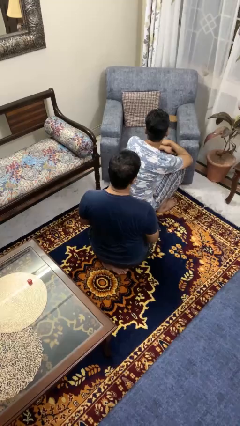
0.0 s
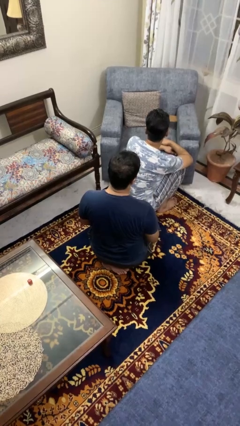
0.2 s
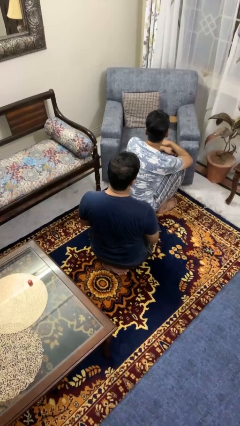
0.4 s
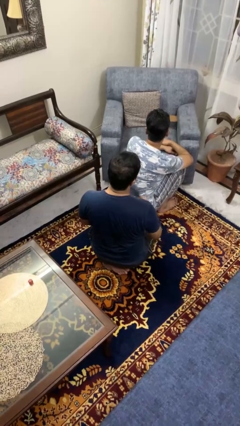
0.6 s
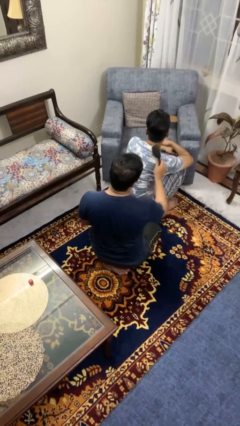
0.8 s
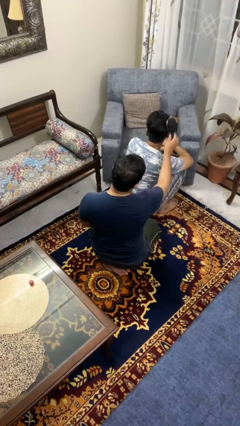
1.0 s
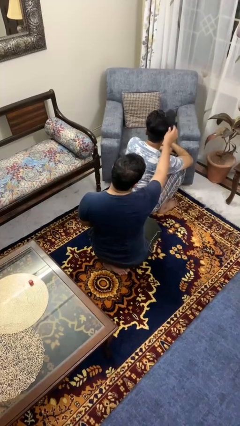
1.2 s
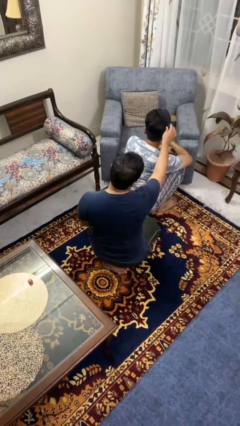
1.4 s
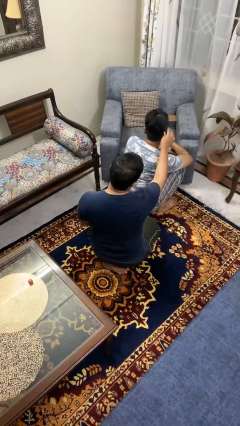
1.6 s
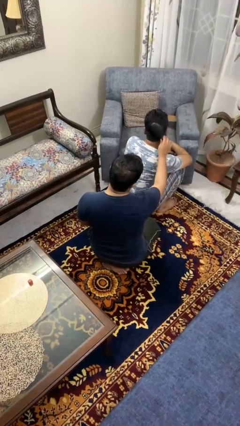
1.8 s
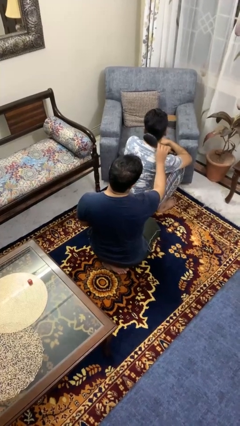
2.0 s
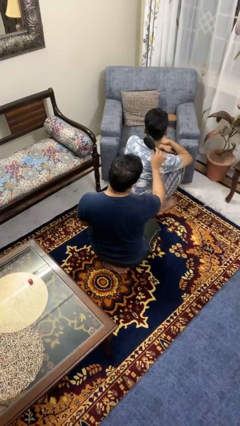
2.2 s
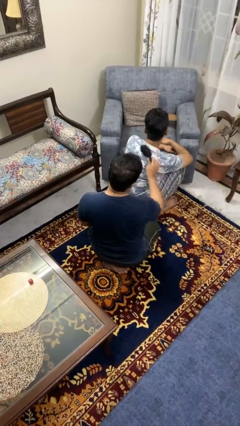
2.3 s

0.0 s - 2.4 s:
person brushes hair of person

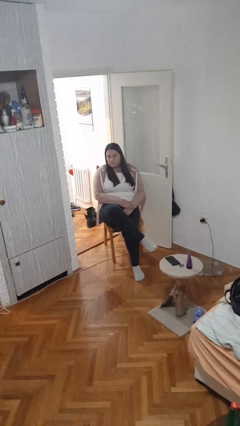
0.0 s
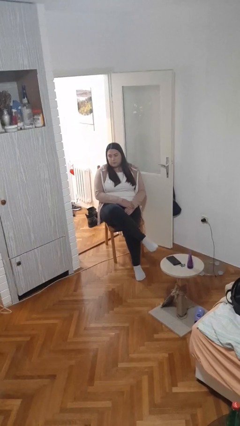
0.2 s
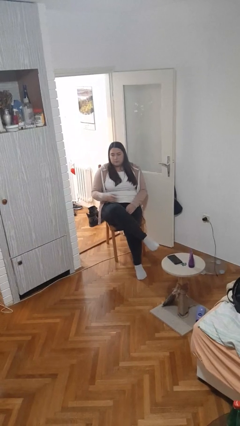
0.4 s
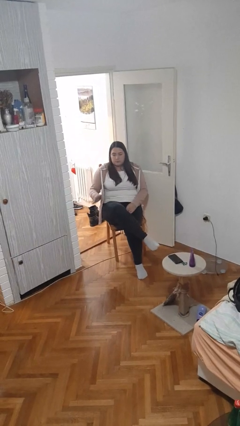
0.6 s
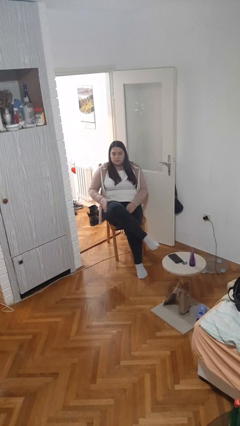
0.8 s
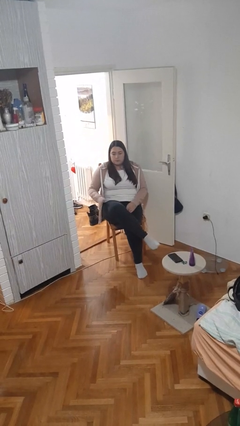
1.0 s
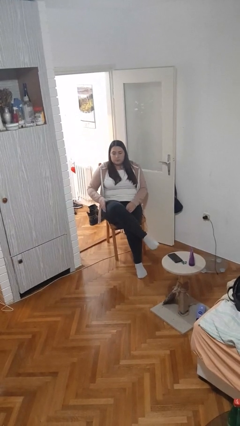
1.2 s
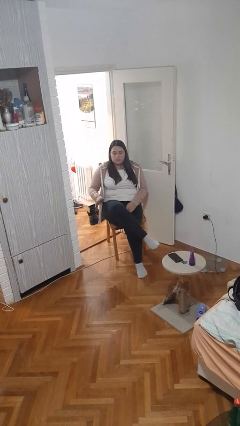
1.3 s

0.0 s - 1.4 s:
person slaps hands on thighs

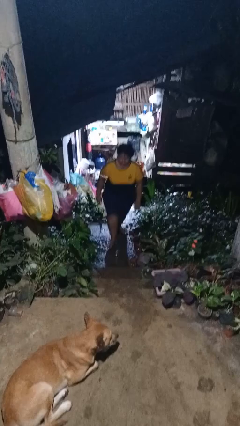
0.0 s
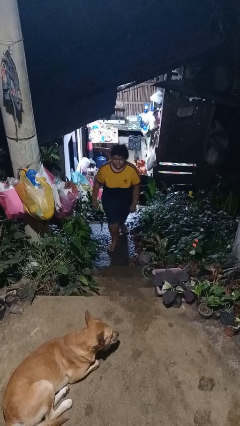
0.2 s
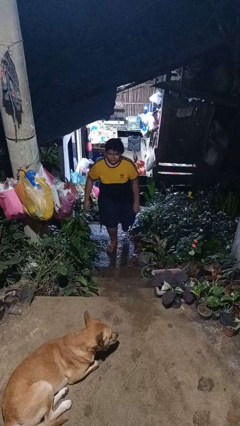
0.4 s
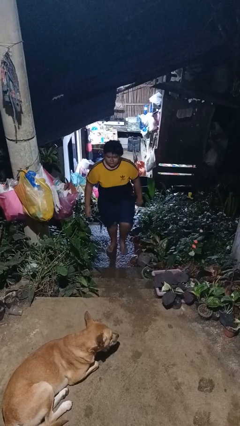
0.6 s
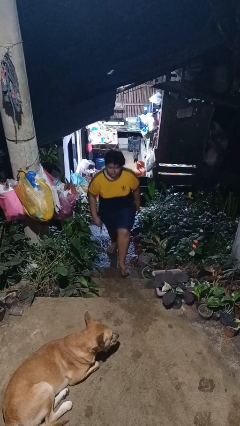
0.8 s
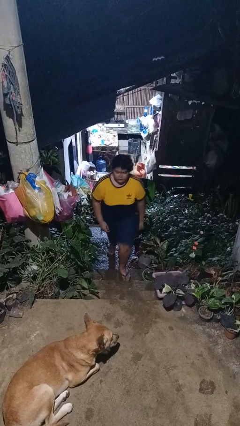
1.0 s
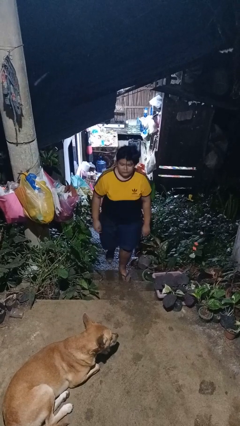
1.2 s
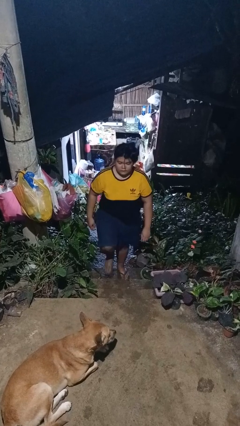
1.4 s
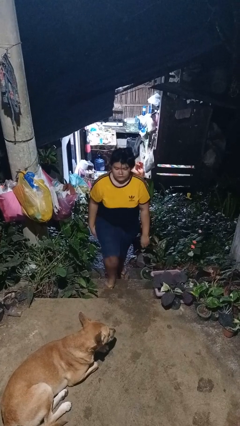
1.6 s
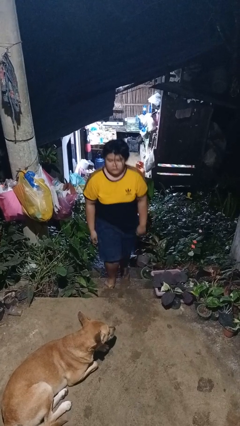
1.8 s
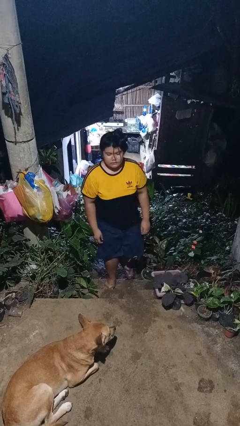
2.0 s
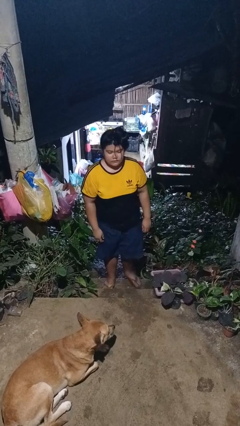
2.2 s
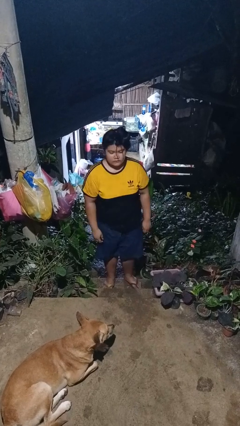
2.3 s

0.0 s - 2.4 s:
person climbs up stairs

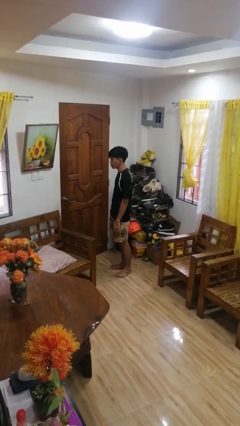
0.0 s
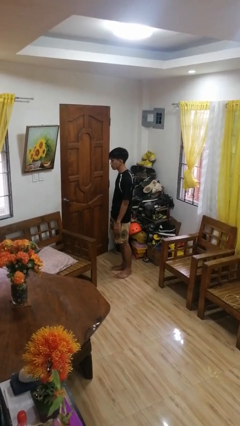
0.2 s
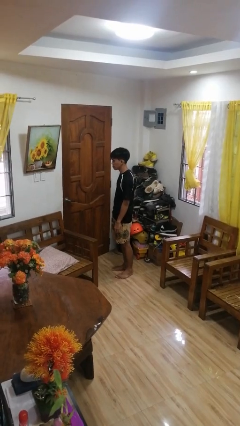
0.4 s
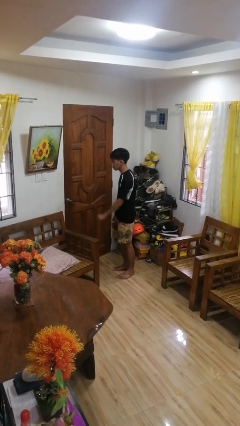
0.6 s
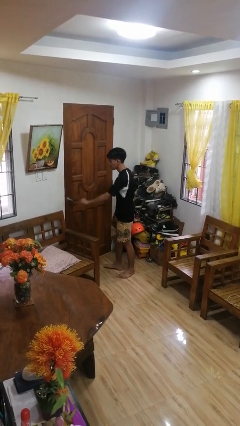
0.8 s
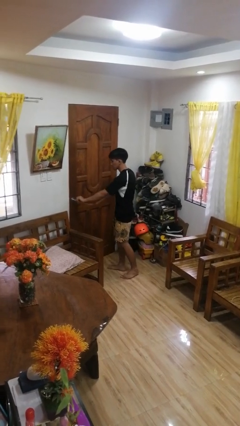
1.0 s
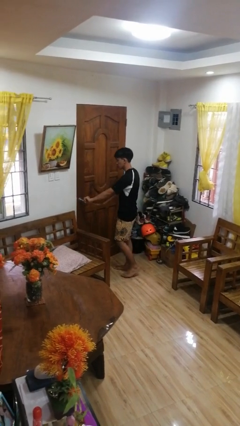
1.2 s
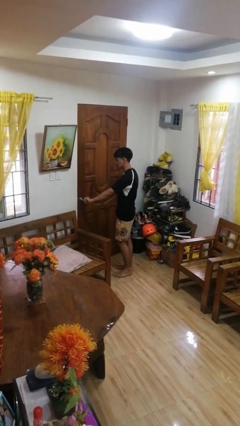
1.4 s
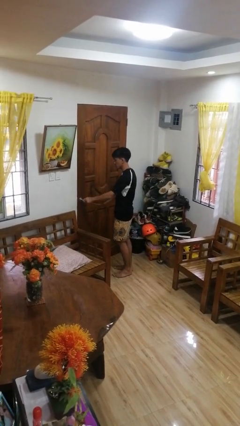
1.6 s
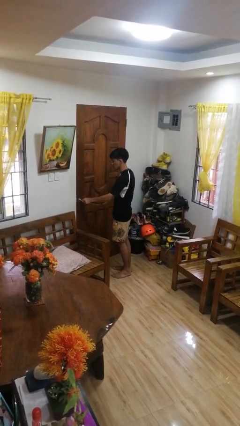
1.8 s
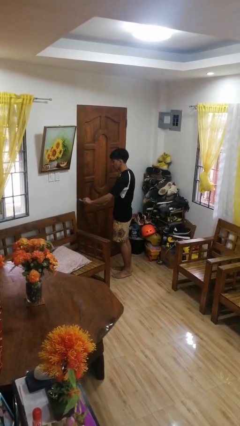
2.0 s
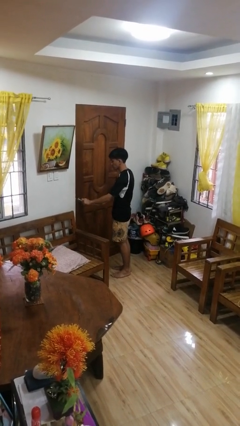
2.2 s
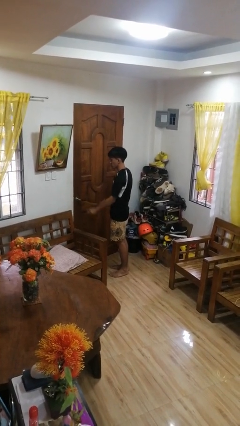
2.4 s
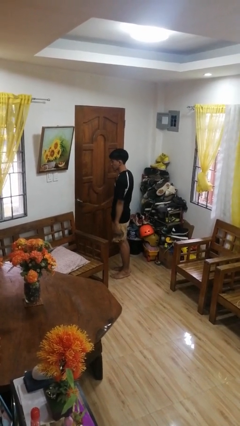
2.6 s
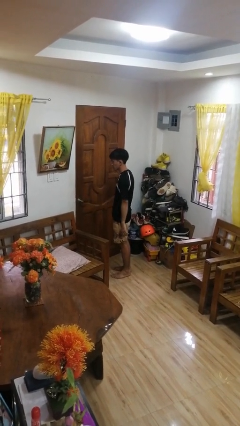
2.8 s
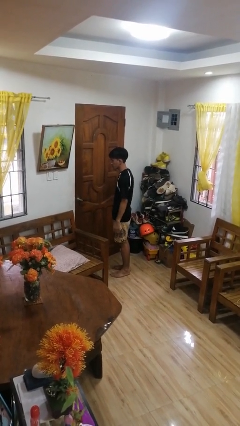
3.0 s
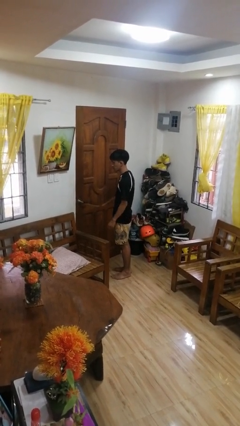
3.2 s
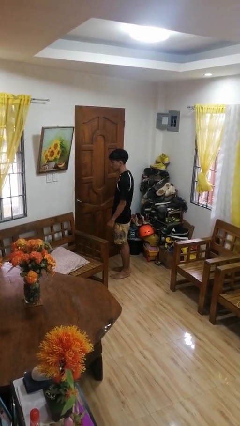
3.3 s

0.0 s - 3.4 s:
person unlocks door with keys

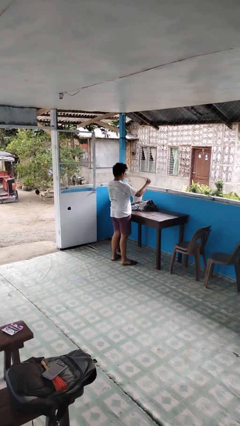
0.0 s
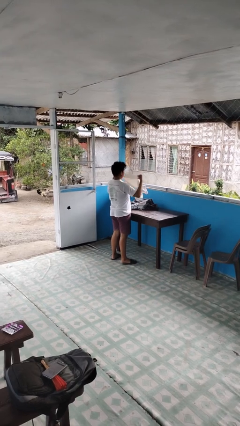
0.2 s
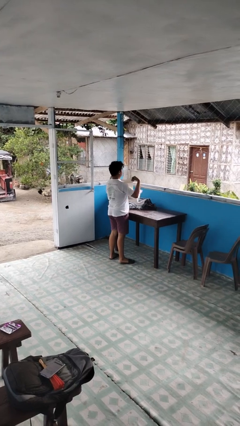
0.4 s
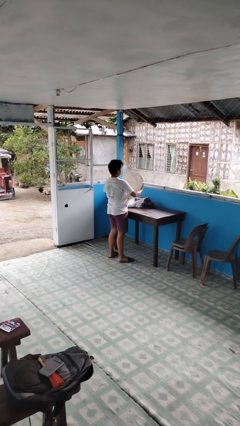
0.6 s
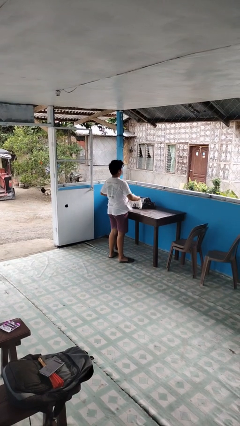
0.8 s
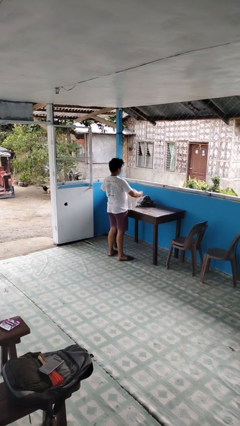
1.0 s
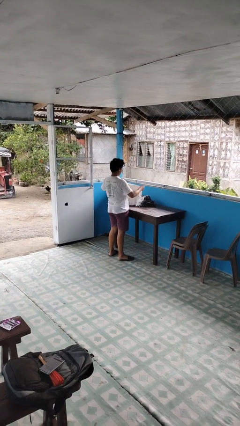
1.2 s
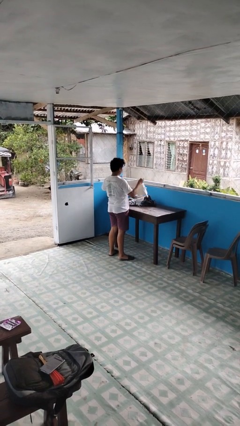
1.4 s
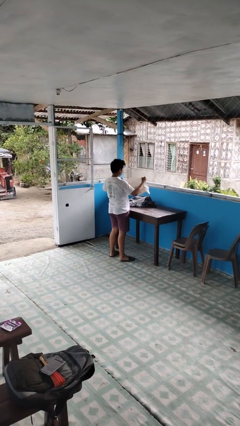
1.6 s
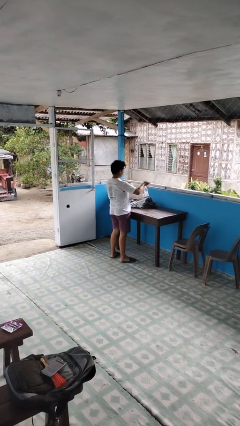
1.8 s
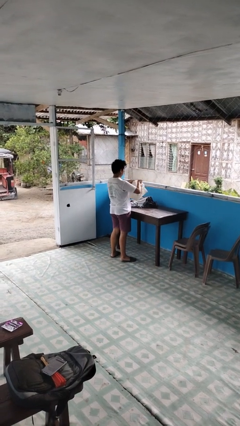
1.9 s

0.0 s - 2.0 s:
person folds shirt

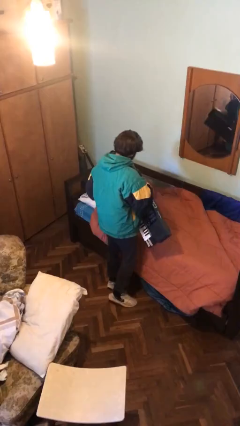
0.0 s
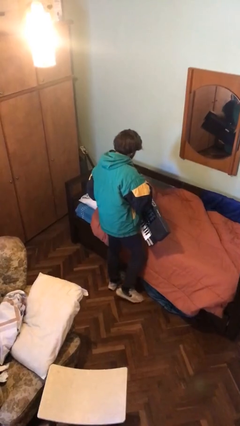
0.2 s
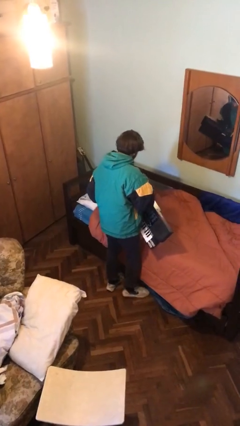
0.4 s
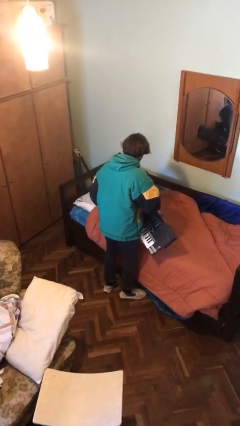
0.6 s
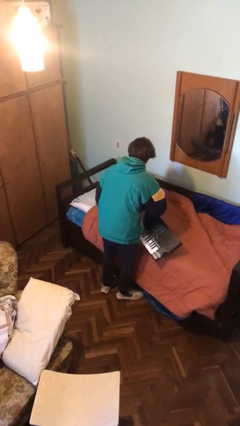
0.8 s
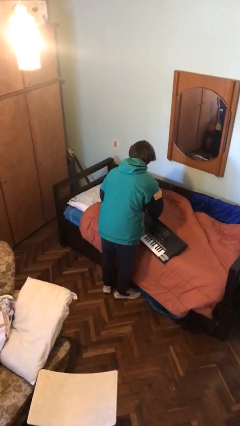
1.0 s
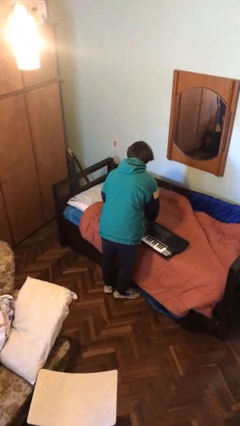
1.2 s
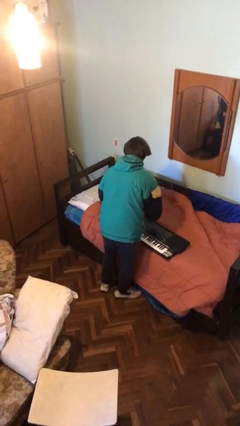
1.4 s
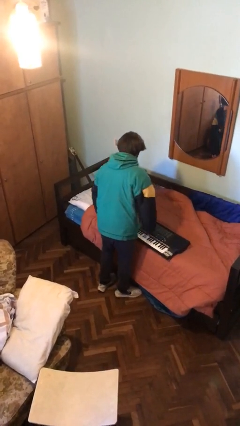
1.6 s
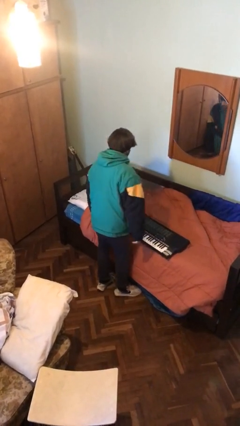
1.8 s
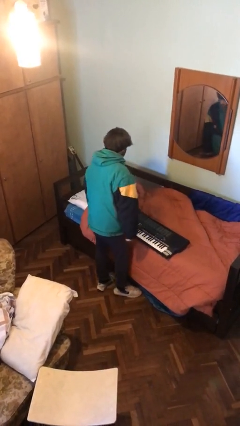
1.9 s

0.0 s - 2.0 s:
person puts down object on bed

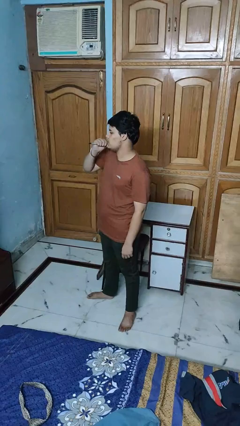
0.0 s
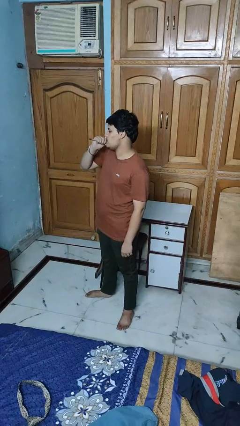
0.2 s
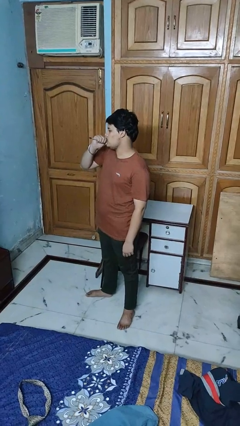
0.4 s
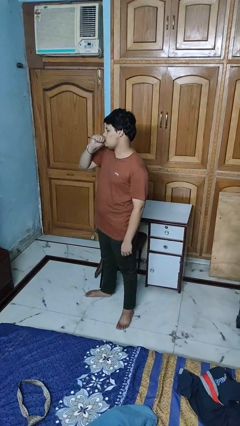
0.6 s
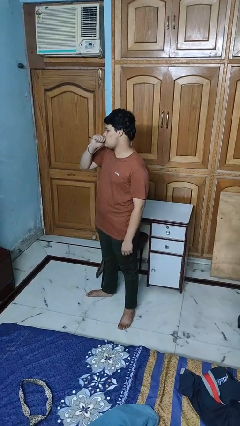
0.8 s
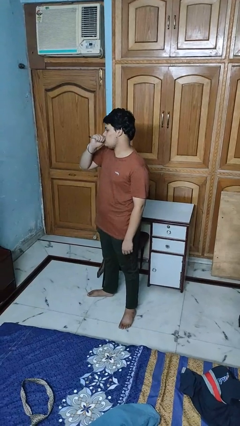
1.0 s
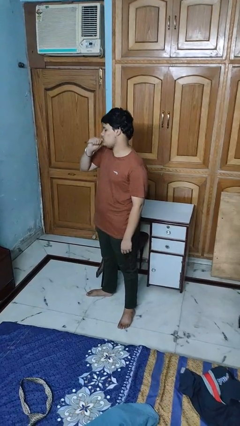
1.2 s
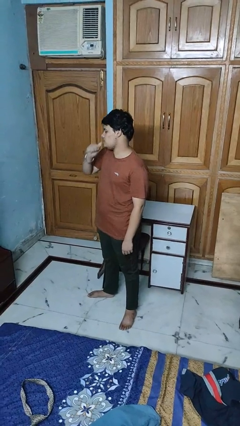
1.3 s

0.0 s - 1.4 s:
person vapes

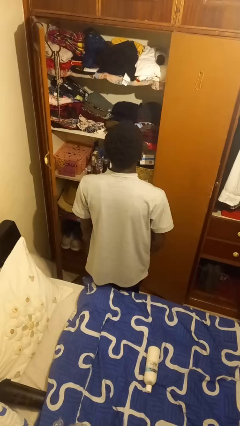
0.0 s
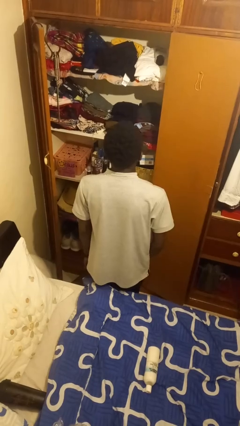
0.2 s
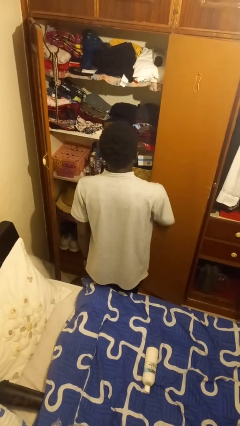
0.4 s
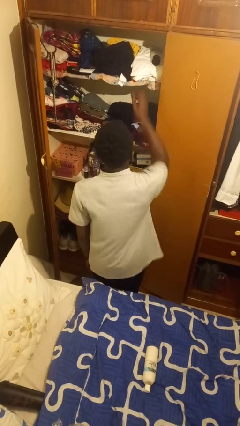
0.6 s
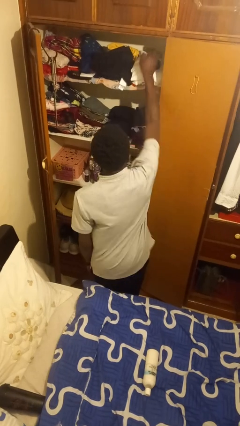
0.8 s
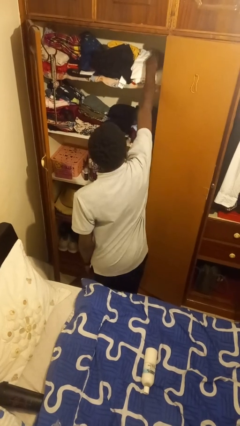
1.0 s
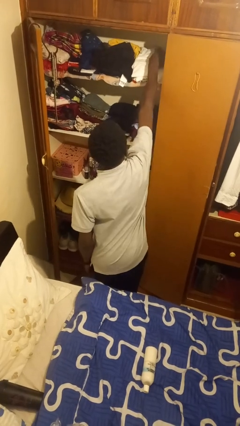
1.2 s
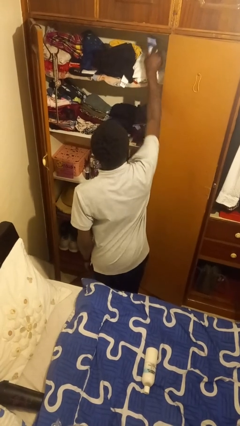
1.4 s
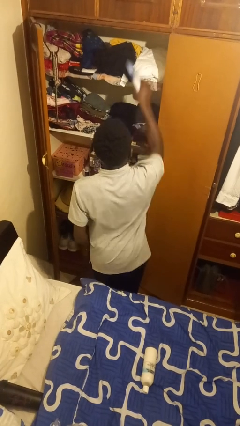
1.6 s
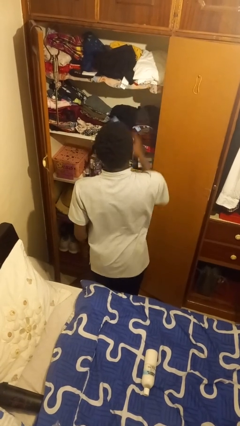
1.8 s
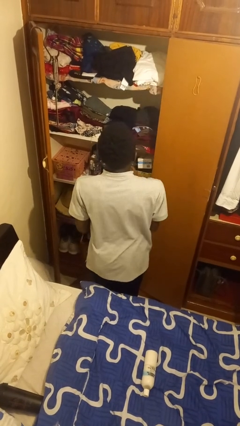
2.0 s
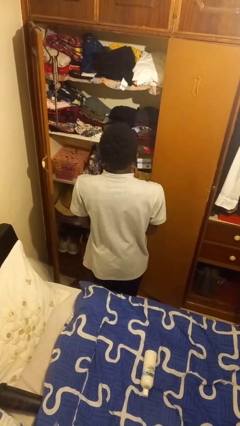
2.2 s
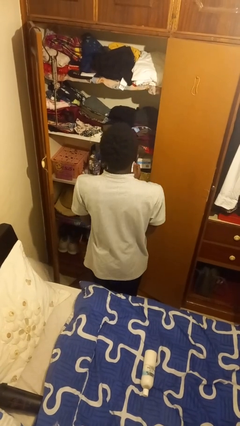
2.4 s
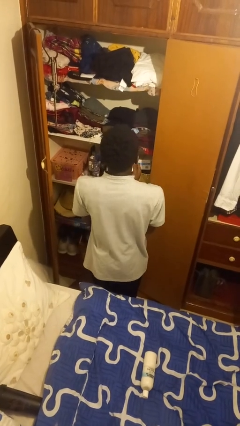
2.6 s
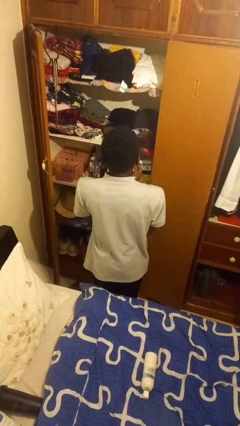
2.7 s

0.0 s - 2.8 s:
person picks up object from shelf
